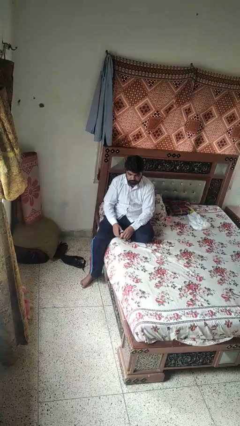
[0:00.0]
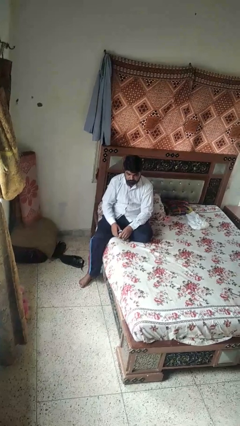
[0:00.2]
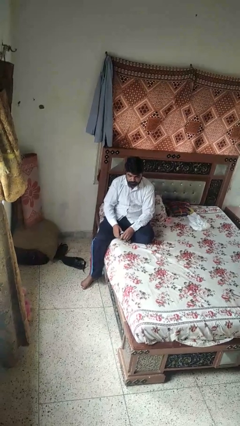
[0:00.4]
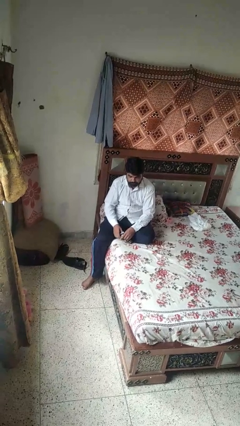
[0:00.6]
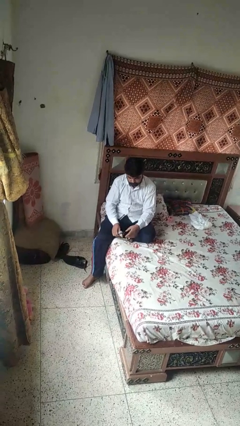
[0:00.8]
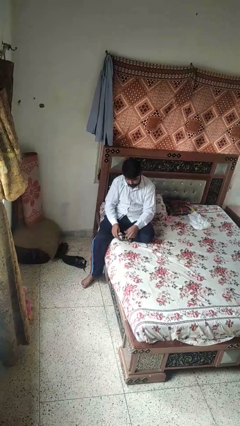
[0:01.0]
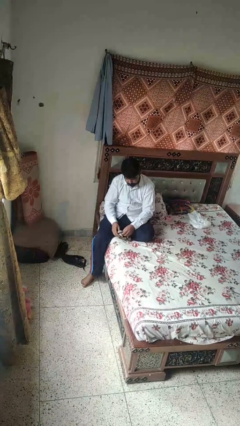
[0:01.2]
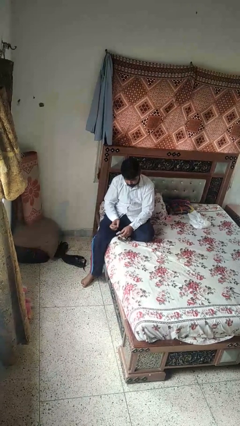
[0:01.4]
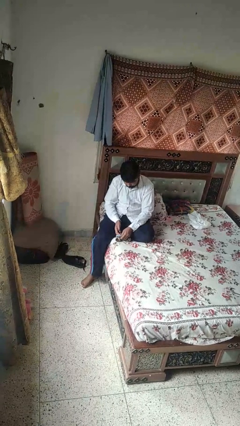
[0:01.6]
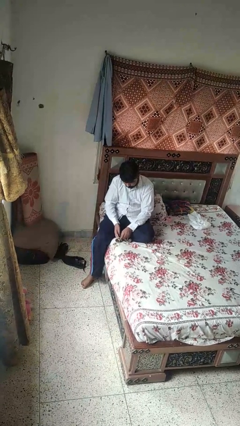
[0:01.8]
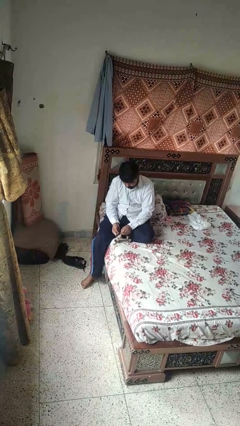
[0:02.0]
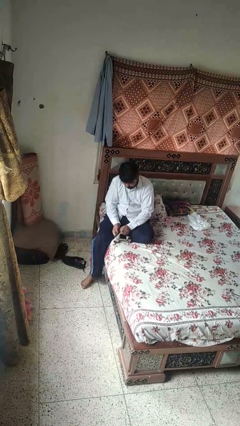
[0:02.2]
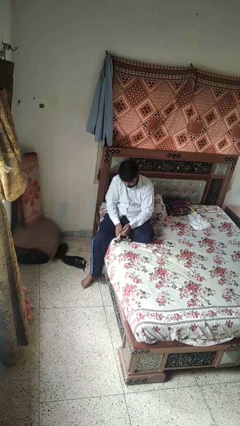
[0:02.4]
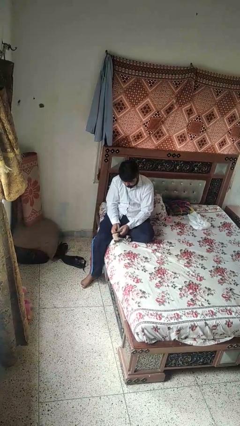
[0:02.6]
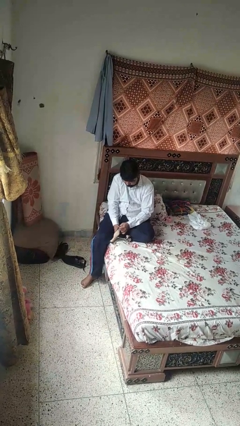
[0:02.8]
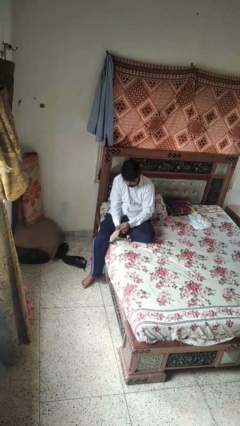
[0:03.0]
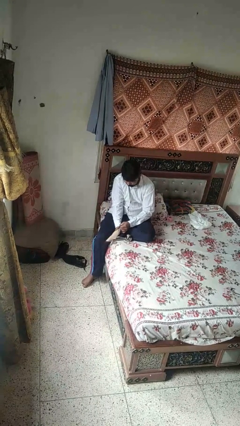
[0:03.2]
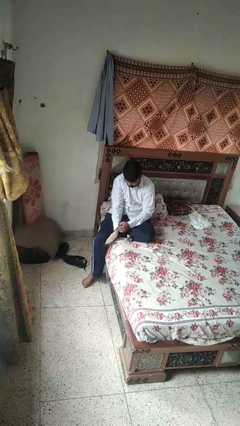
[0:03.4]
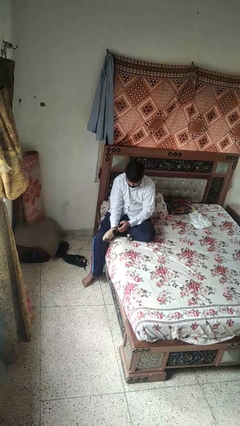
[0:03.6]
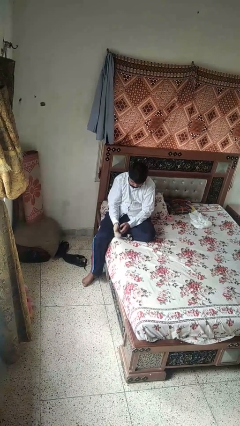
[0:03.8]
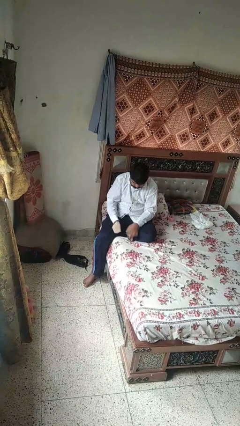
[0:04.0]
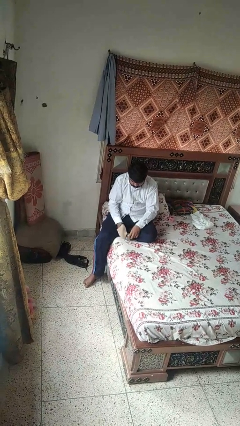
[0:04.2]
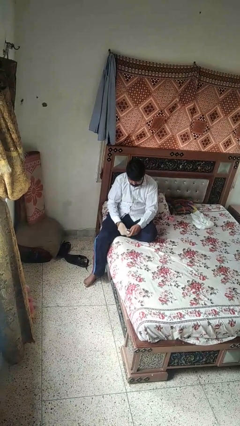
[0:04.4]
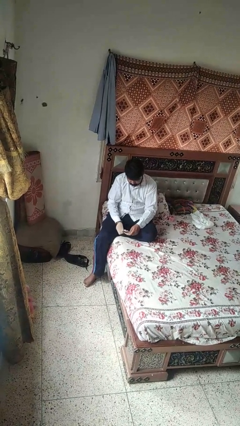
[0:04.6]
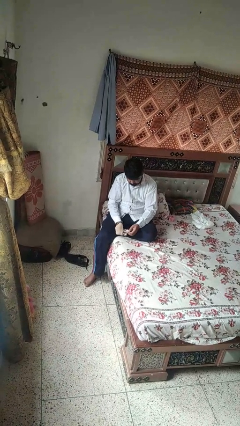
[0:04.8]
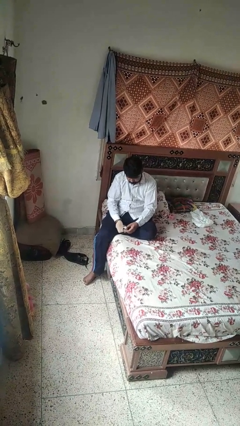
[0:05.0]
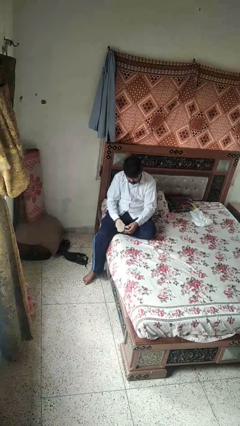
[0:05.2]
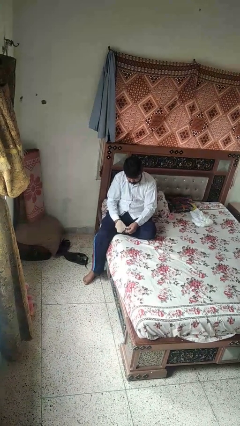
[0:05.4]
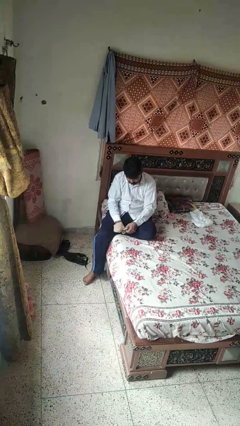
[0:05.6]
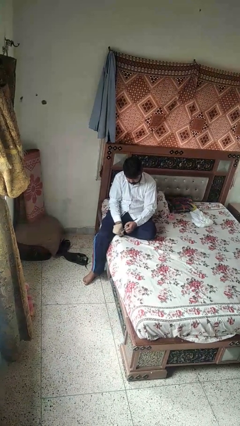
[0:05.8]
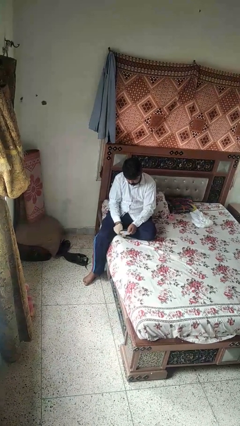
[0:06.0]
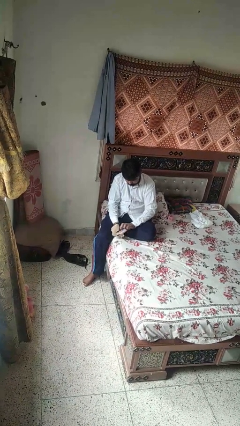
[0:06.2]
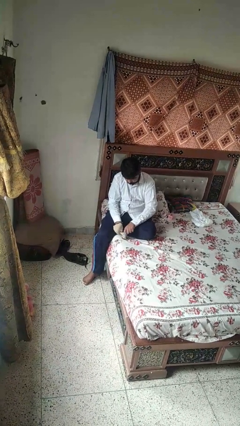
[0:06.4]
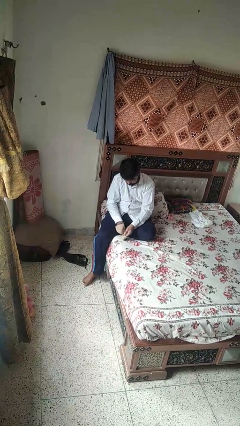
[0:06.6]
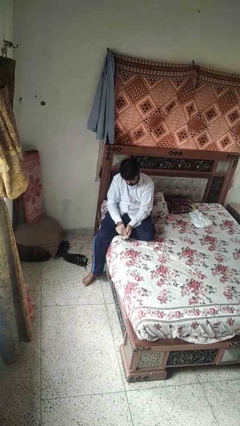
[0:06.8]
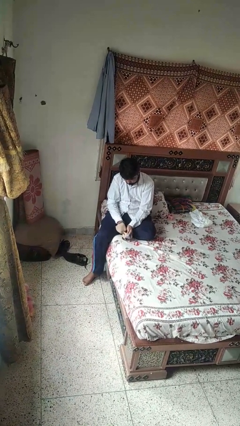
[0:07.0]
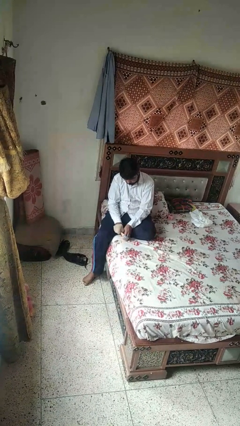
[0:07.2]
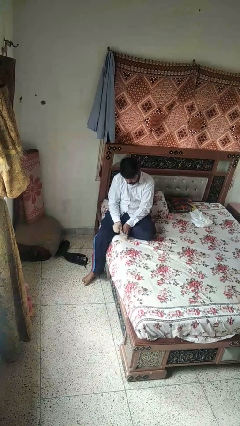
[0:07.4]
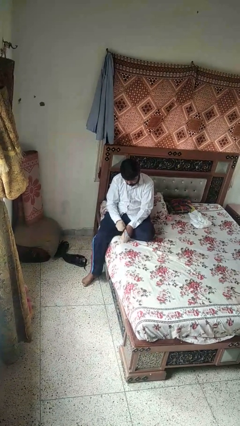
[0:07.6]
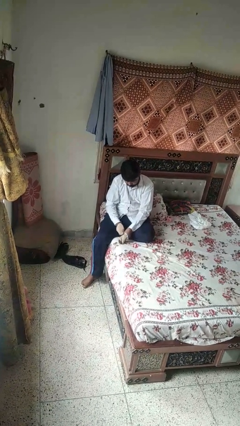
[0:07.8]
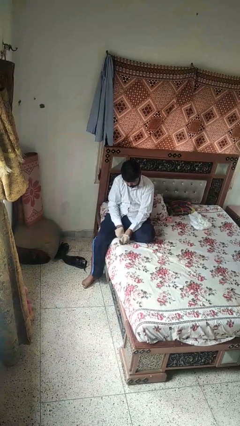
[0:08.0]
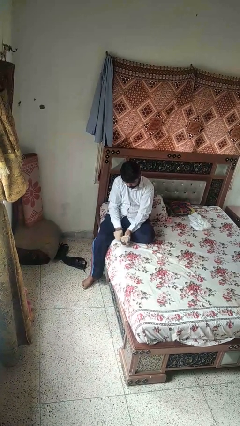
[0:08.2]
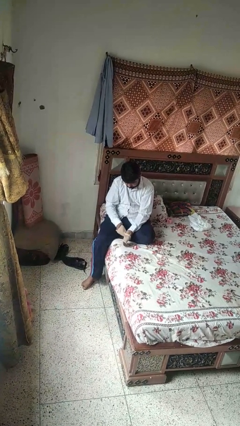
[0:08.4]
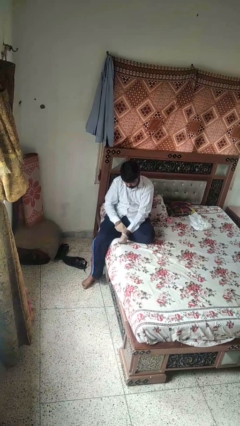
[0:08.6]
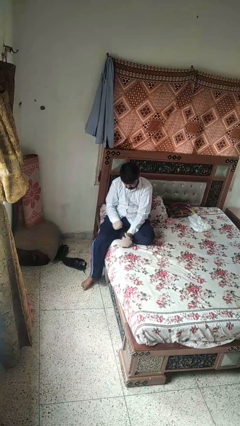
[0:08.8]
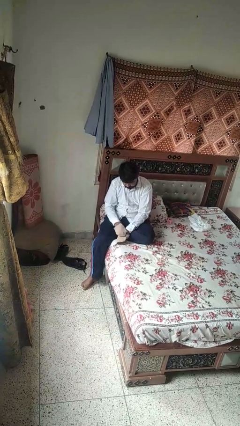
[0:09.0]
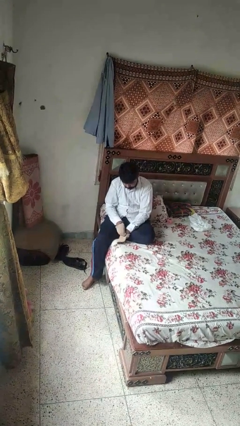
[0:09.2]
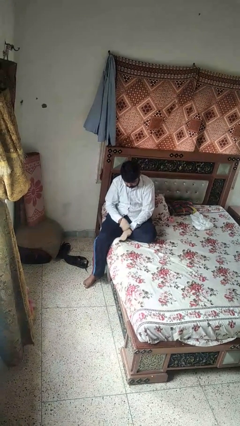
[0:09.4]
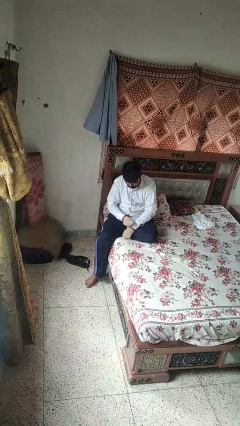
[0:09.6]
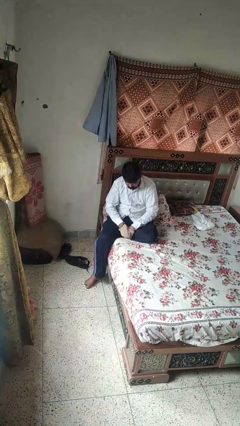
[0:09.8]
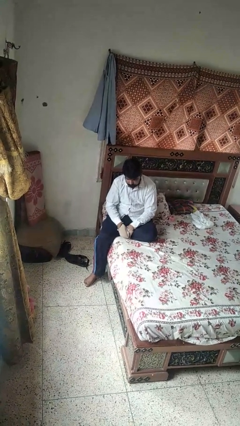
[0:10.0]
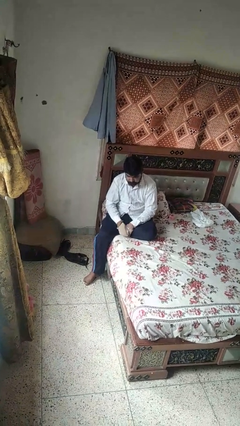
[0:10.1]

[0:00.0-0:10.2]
person puts on gloves

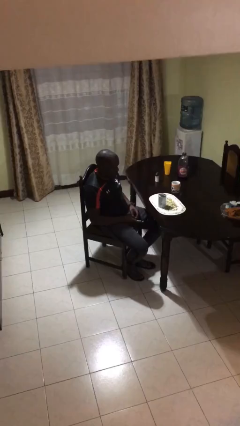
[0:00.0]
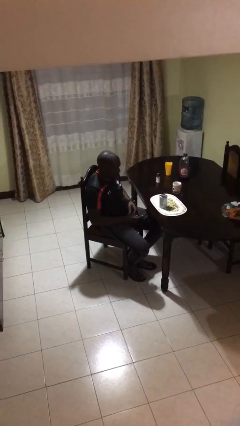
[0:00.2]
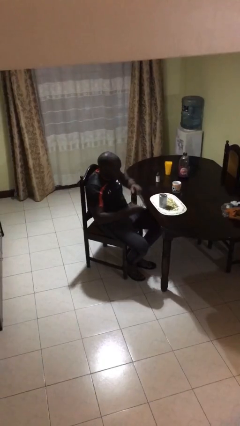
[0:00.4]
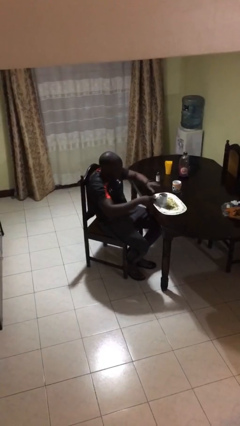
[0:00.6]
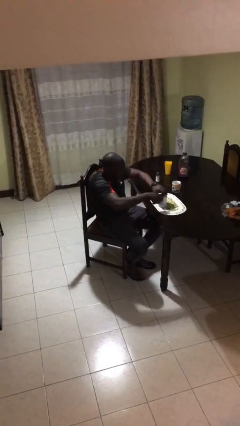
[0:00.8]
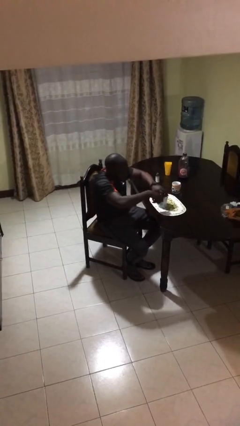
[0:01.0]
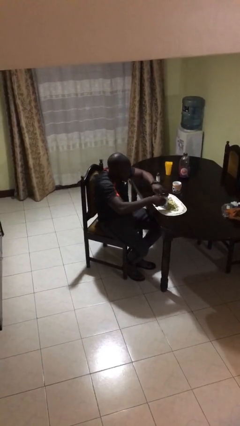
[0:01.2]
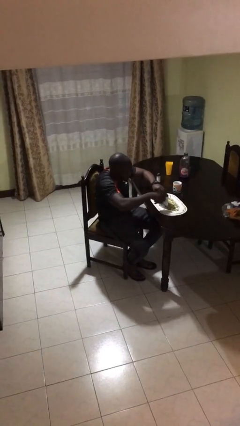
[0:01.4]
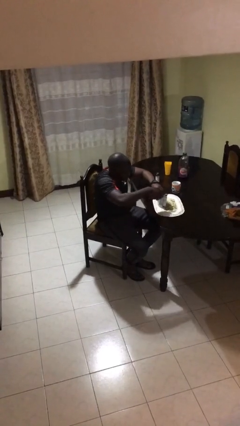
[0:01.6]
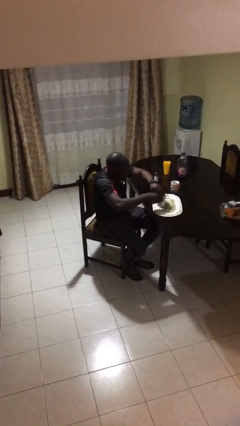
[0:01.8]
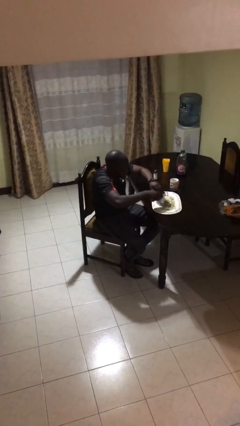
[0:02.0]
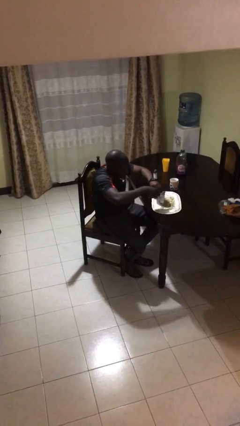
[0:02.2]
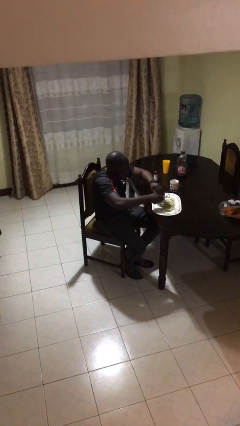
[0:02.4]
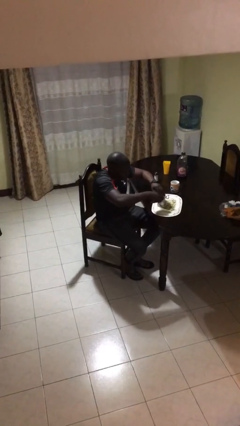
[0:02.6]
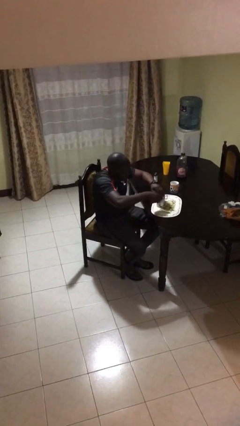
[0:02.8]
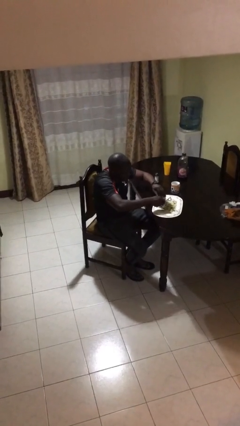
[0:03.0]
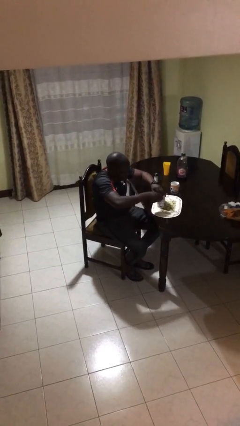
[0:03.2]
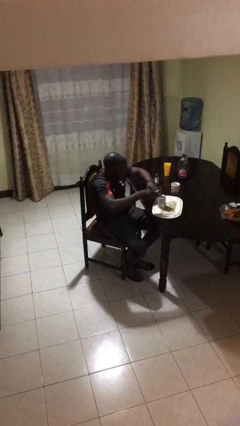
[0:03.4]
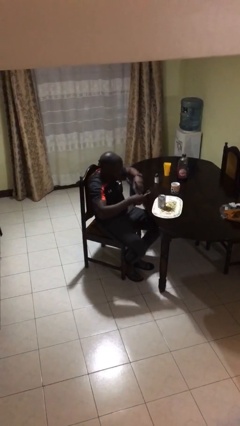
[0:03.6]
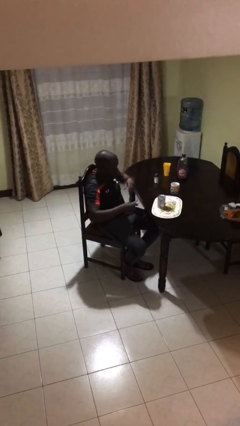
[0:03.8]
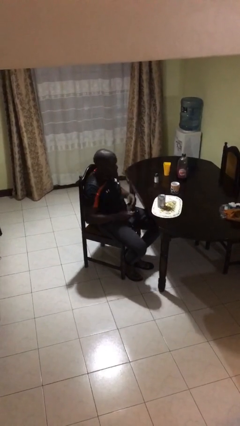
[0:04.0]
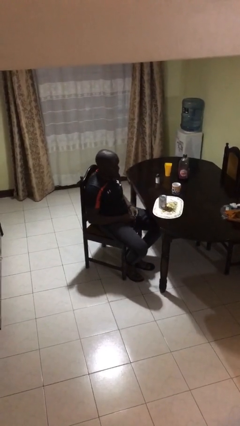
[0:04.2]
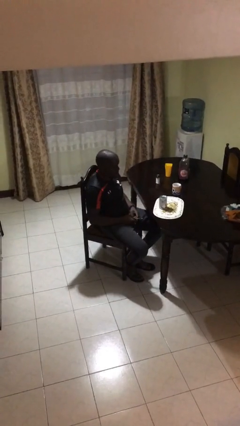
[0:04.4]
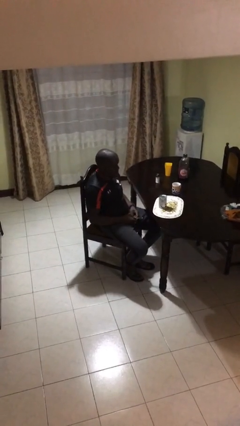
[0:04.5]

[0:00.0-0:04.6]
person opens can with can opener

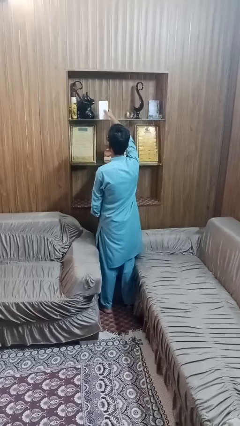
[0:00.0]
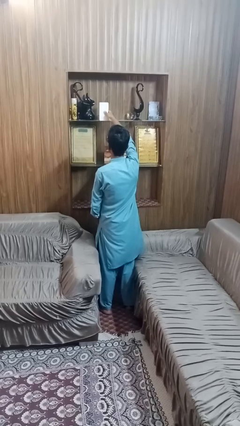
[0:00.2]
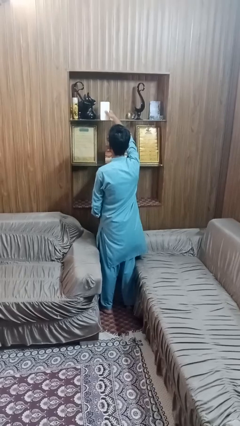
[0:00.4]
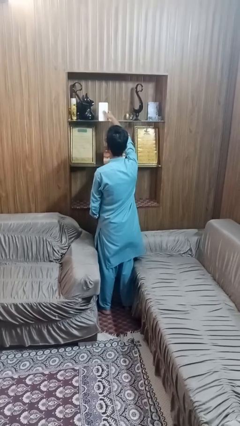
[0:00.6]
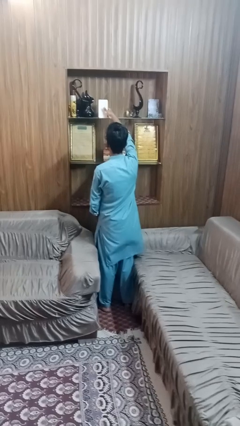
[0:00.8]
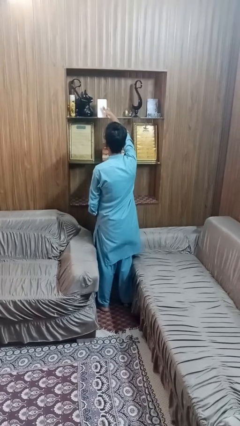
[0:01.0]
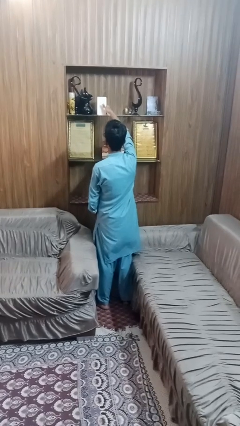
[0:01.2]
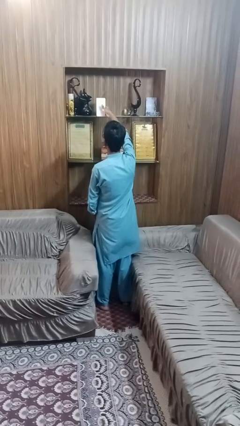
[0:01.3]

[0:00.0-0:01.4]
person puts down object on shelf

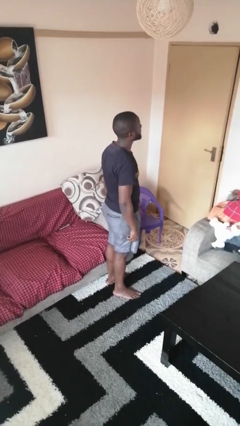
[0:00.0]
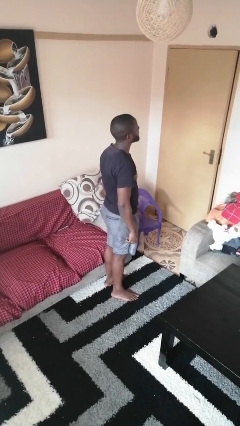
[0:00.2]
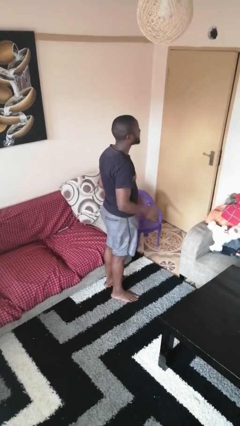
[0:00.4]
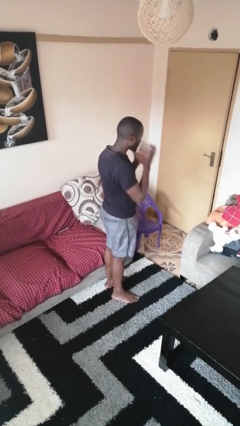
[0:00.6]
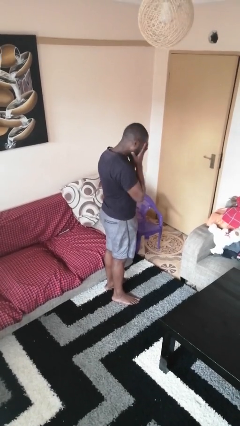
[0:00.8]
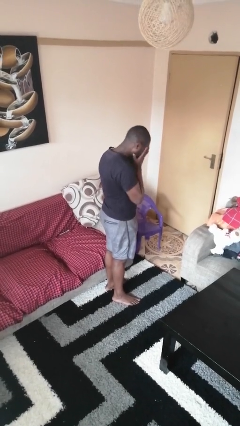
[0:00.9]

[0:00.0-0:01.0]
person covers face with hands

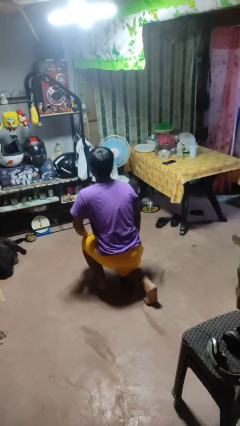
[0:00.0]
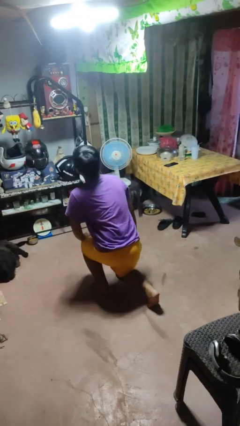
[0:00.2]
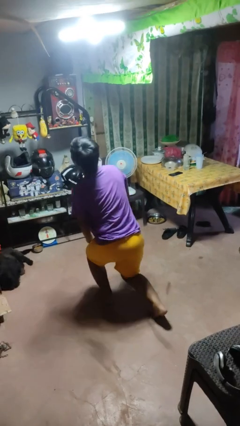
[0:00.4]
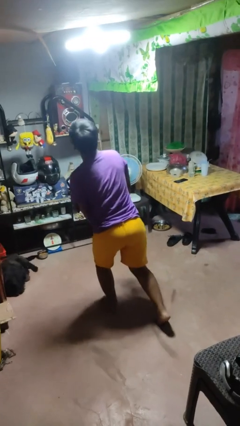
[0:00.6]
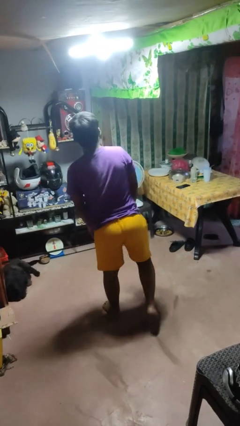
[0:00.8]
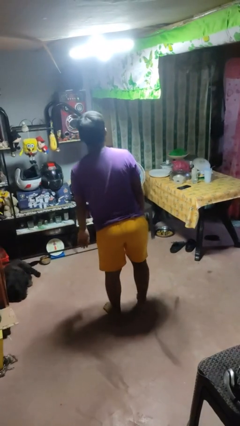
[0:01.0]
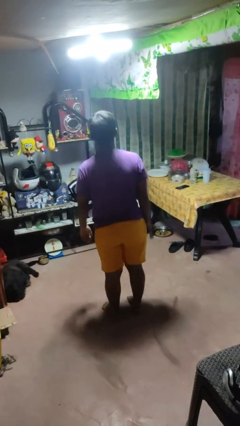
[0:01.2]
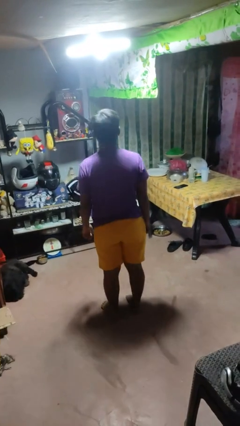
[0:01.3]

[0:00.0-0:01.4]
person stands up from floor
